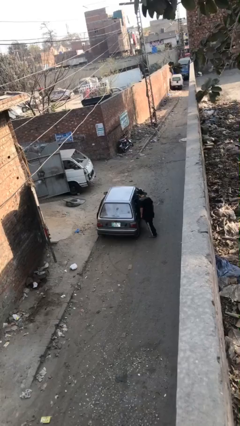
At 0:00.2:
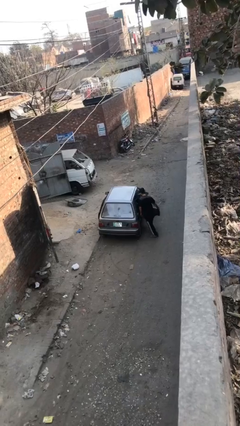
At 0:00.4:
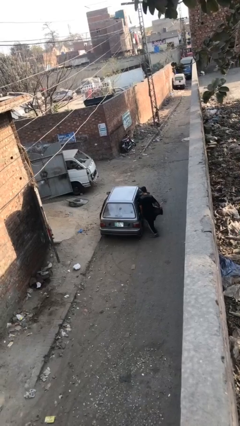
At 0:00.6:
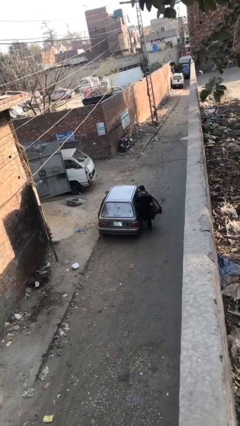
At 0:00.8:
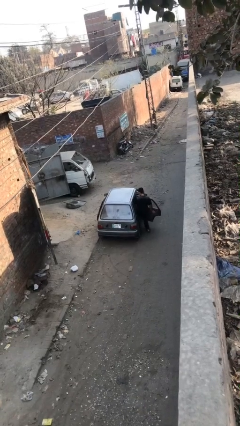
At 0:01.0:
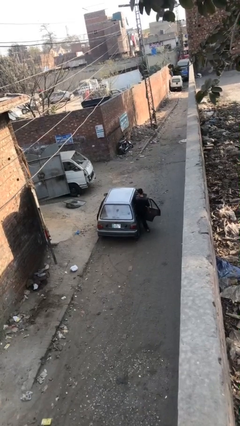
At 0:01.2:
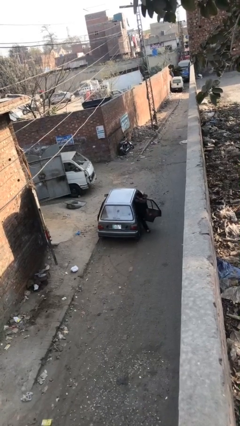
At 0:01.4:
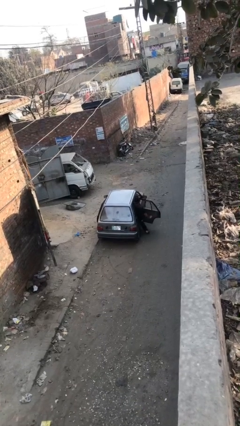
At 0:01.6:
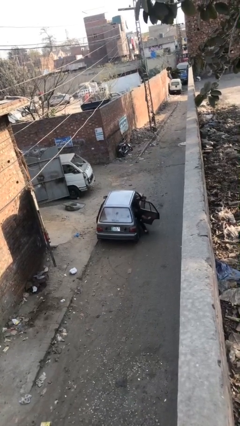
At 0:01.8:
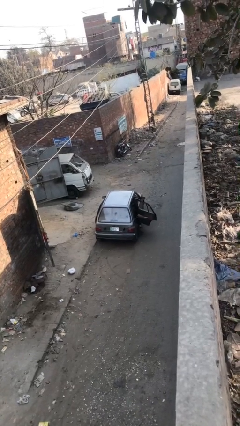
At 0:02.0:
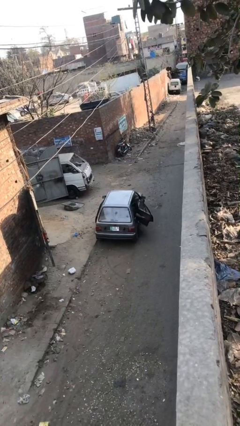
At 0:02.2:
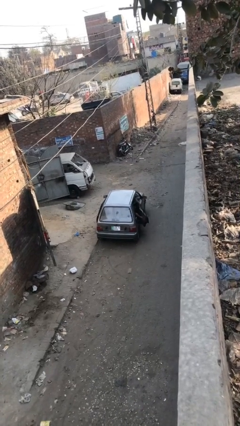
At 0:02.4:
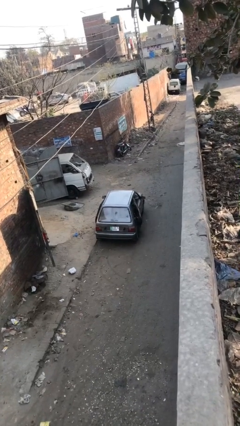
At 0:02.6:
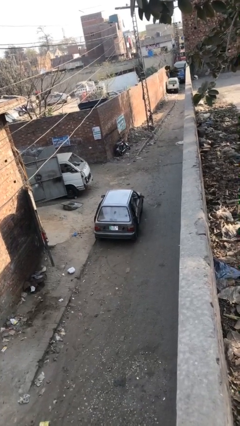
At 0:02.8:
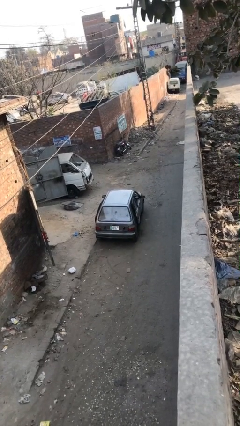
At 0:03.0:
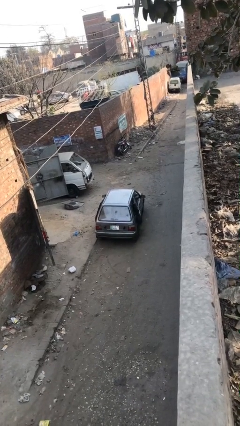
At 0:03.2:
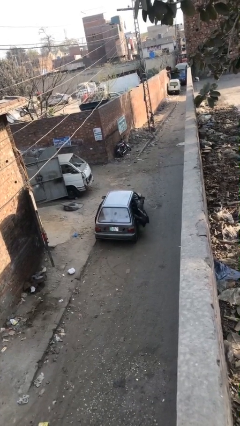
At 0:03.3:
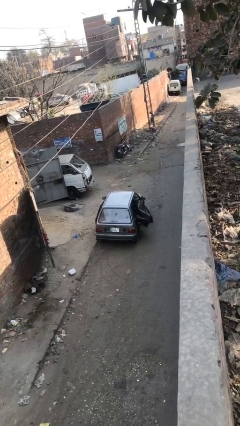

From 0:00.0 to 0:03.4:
car picks up person

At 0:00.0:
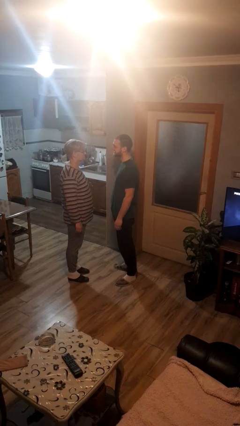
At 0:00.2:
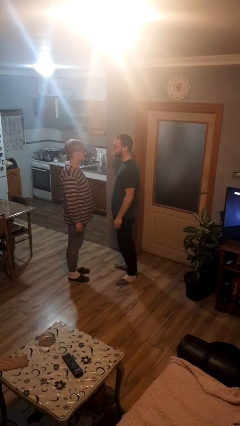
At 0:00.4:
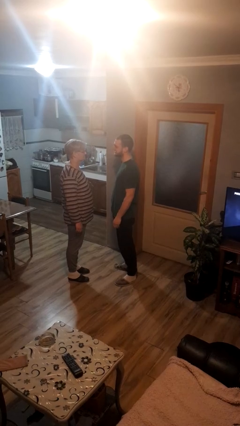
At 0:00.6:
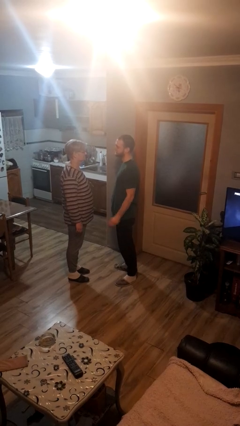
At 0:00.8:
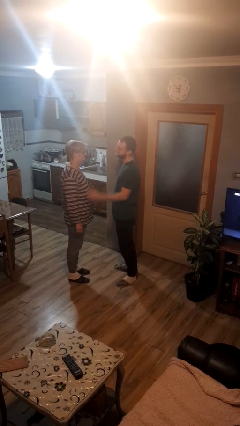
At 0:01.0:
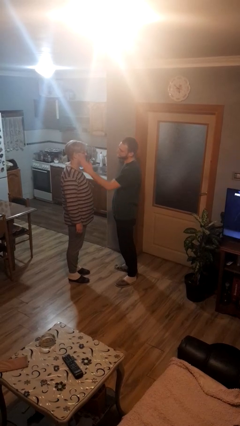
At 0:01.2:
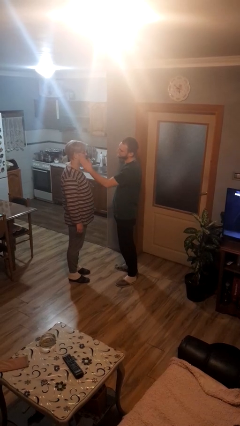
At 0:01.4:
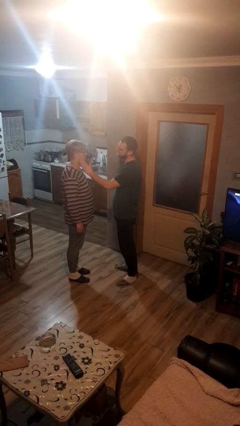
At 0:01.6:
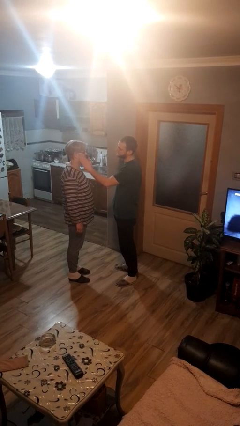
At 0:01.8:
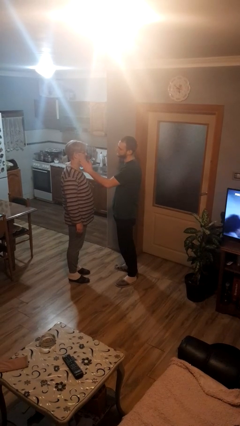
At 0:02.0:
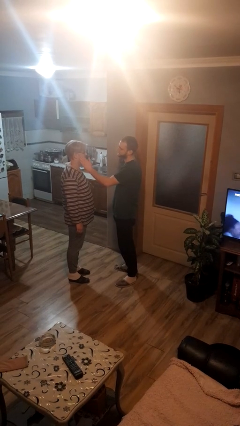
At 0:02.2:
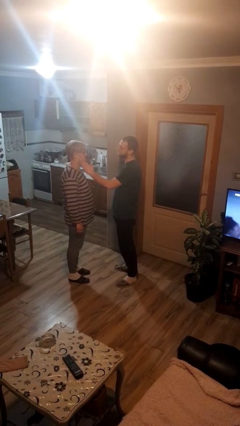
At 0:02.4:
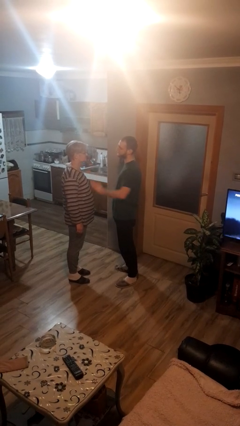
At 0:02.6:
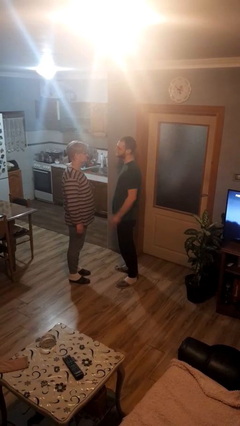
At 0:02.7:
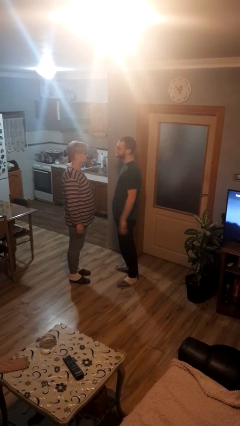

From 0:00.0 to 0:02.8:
person touches face of person

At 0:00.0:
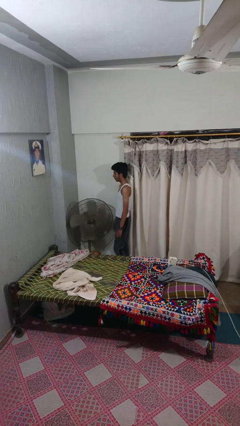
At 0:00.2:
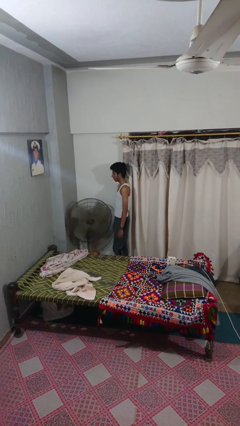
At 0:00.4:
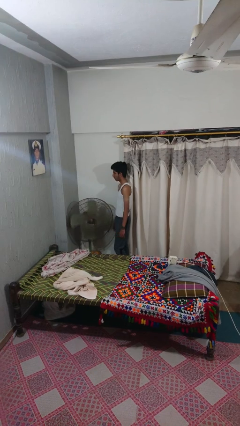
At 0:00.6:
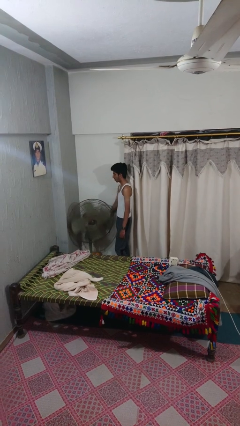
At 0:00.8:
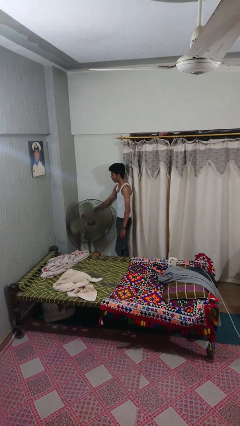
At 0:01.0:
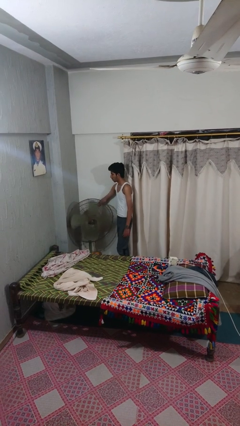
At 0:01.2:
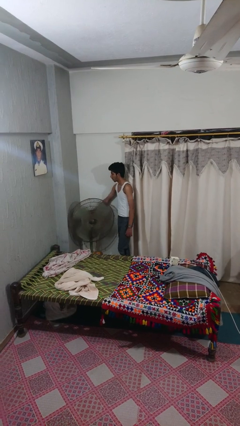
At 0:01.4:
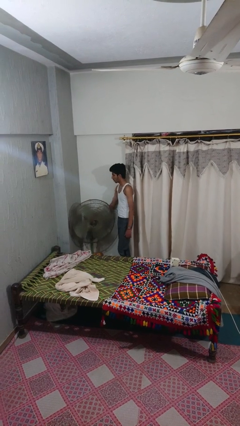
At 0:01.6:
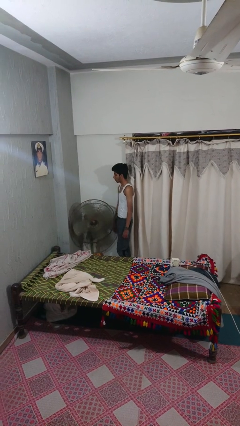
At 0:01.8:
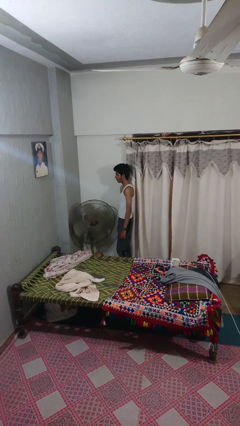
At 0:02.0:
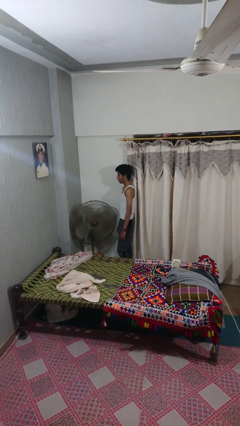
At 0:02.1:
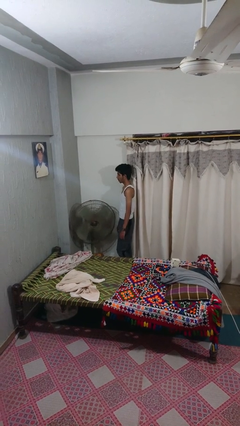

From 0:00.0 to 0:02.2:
person turns off fan

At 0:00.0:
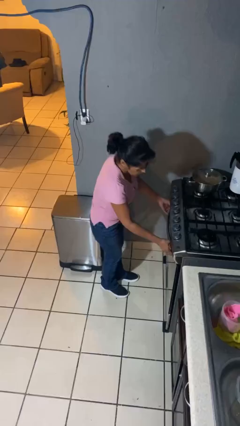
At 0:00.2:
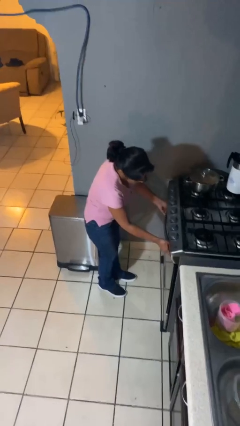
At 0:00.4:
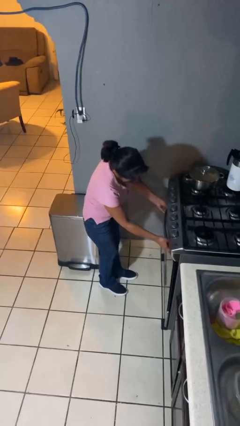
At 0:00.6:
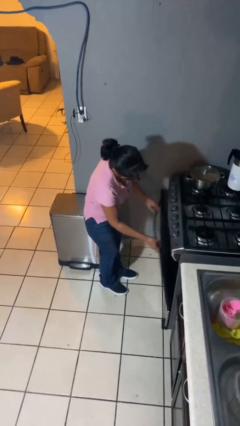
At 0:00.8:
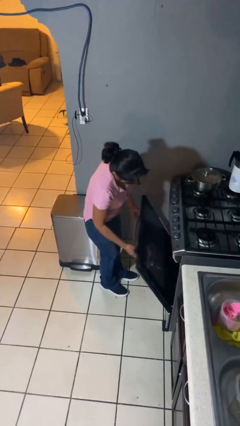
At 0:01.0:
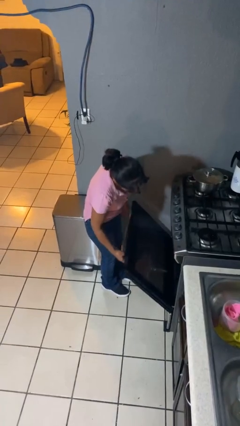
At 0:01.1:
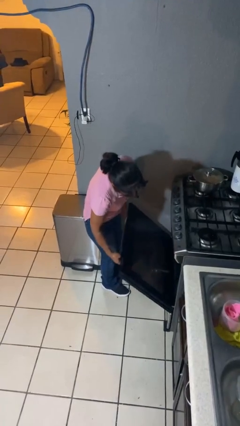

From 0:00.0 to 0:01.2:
person opens oven door

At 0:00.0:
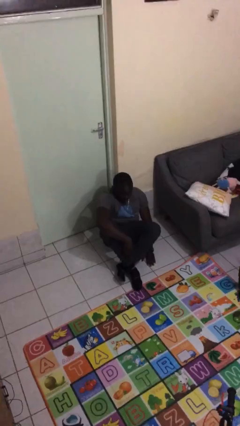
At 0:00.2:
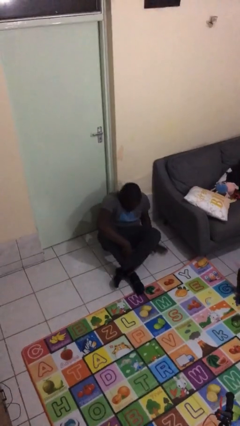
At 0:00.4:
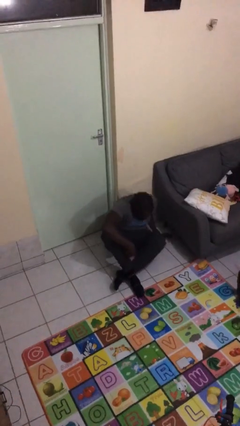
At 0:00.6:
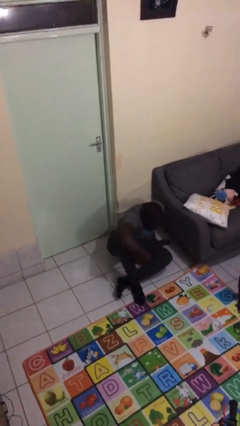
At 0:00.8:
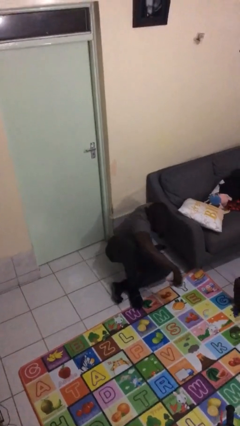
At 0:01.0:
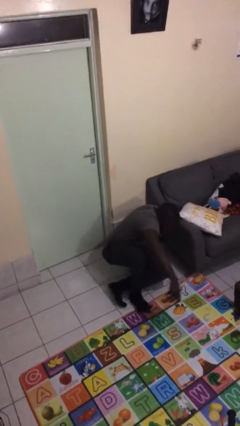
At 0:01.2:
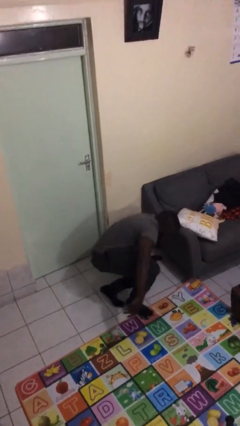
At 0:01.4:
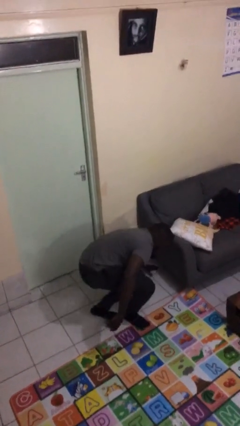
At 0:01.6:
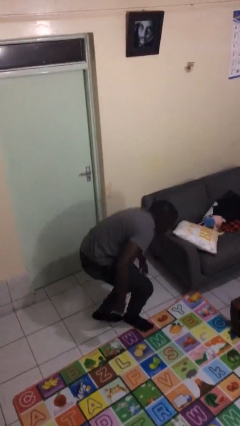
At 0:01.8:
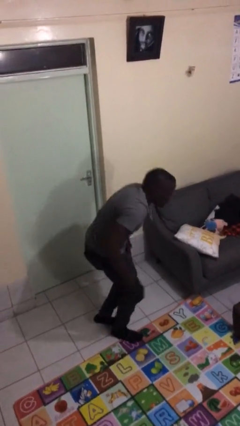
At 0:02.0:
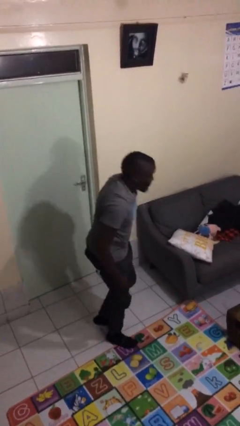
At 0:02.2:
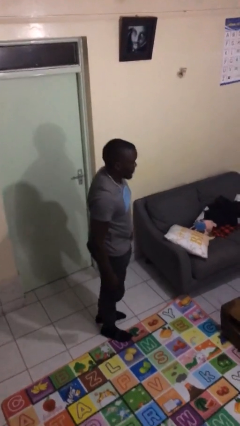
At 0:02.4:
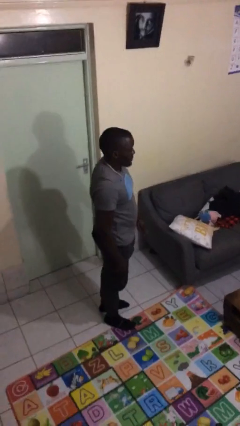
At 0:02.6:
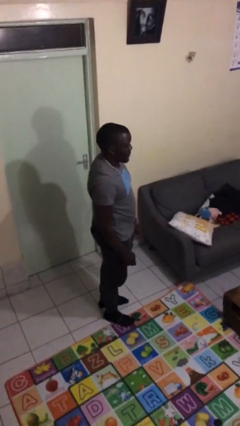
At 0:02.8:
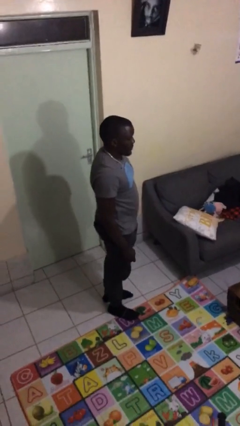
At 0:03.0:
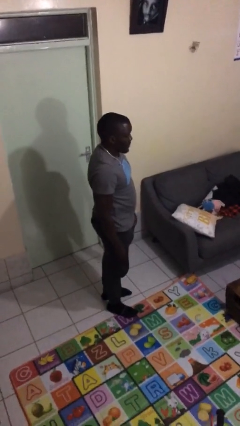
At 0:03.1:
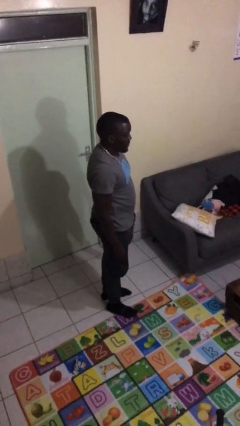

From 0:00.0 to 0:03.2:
person stands up from floor

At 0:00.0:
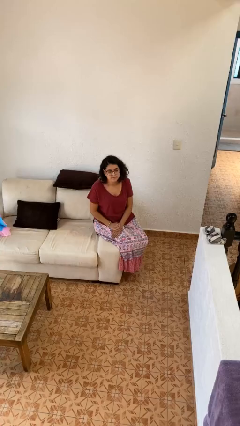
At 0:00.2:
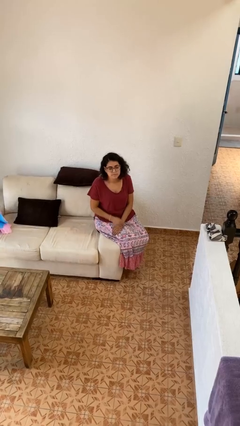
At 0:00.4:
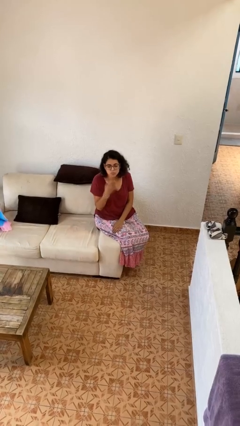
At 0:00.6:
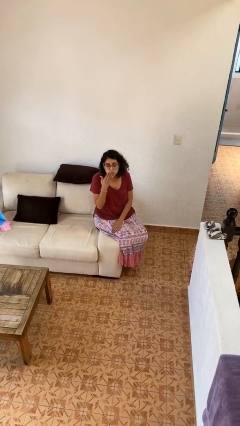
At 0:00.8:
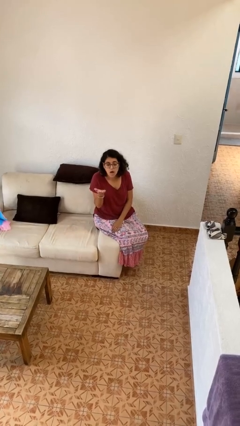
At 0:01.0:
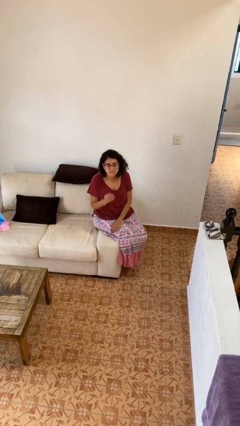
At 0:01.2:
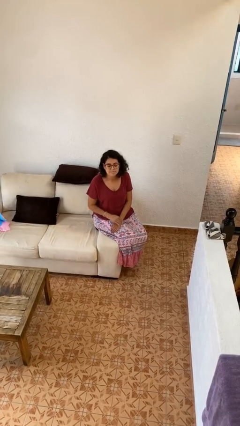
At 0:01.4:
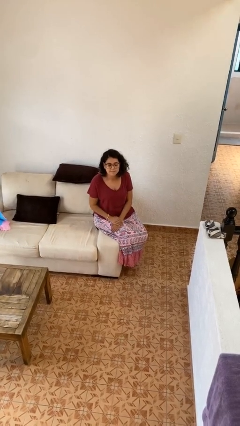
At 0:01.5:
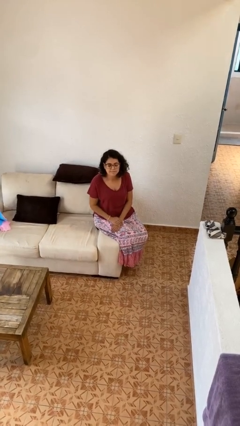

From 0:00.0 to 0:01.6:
person gestures blow kiss

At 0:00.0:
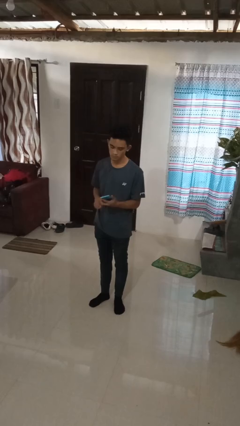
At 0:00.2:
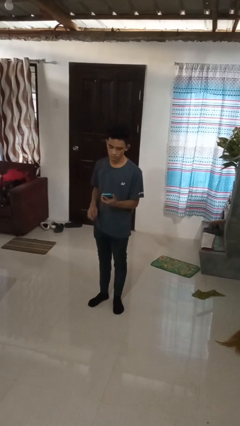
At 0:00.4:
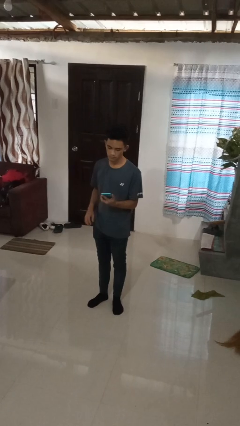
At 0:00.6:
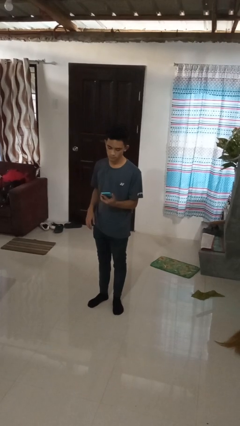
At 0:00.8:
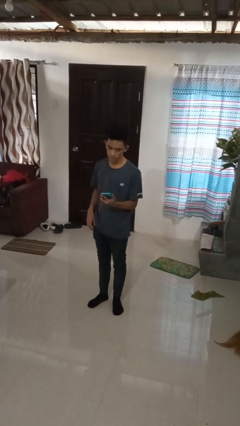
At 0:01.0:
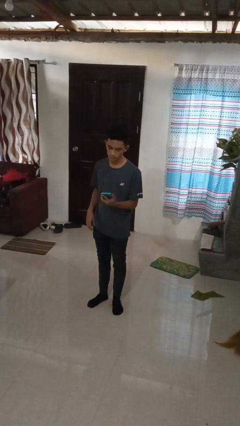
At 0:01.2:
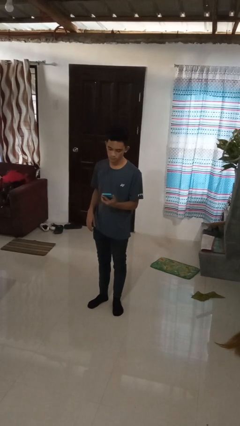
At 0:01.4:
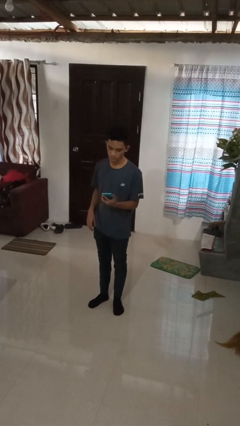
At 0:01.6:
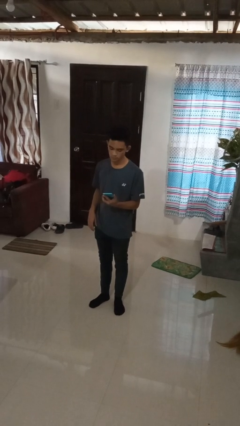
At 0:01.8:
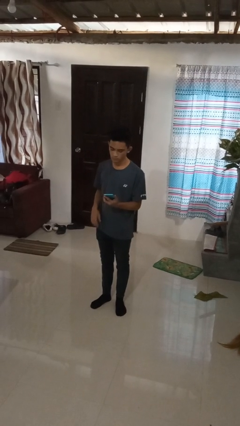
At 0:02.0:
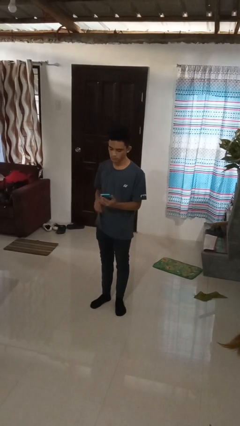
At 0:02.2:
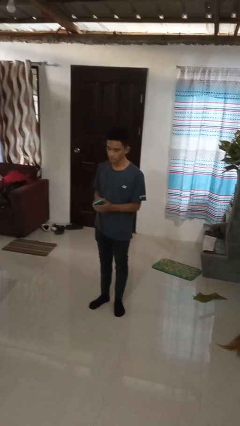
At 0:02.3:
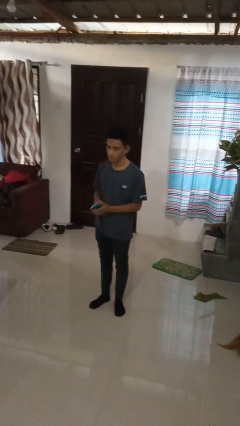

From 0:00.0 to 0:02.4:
person takes phone from pocket
